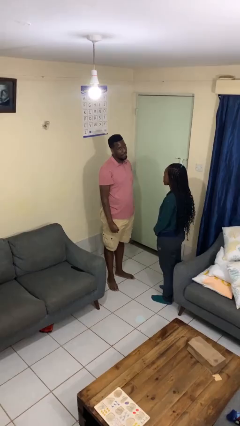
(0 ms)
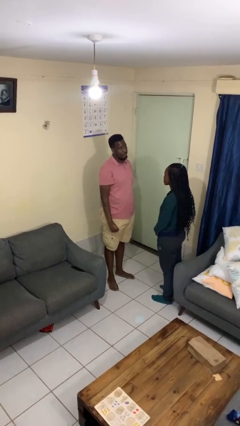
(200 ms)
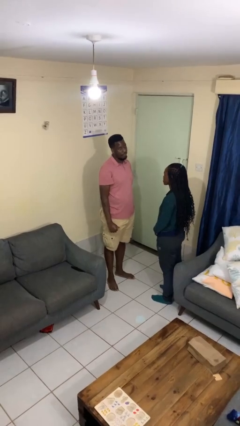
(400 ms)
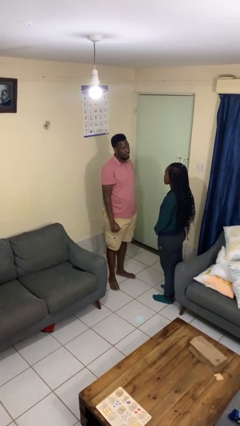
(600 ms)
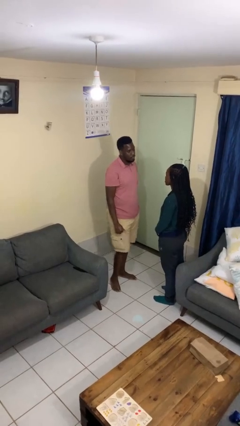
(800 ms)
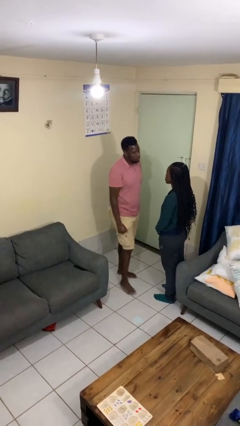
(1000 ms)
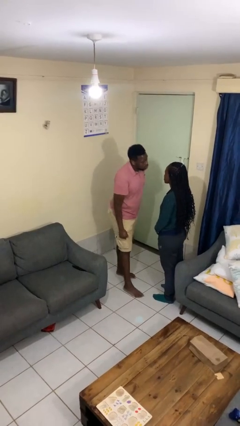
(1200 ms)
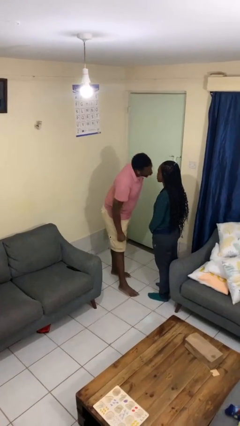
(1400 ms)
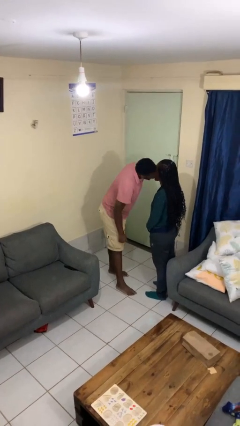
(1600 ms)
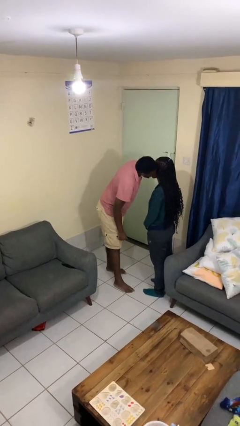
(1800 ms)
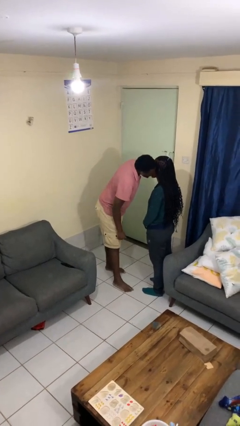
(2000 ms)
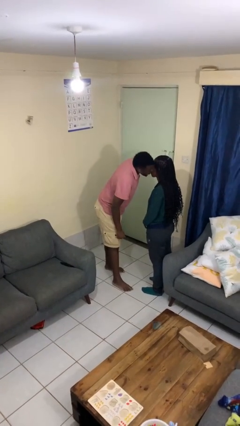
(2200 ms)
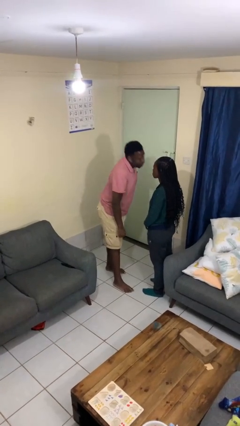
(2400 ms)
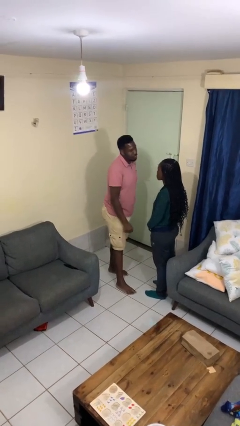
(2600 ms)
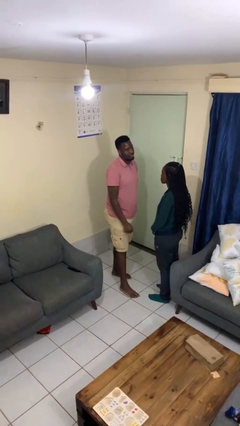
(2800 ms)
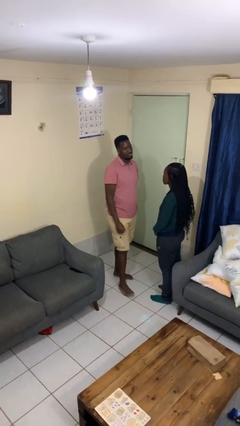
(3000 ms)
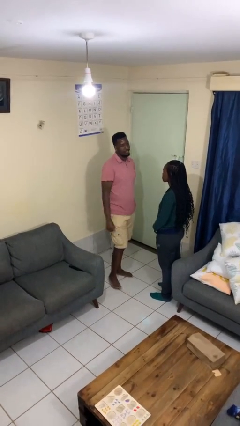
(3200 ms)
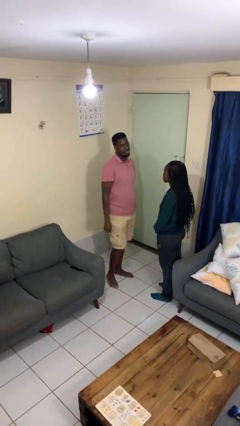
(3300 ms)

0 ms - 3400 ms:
person kisses cheek of person

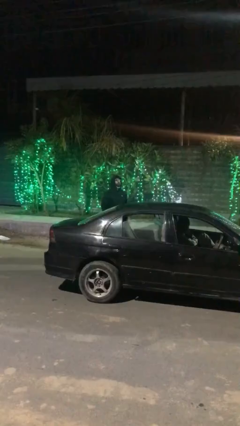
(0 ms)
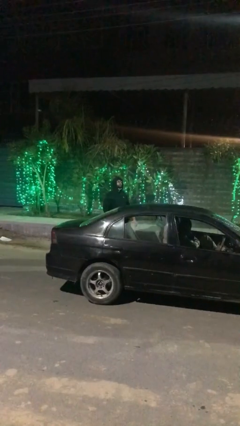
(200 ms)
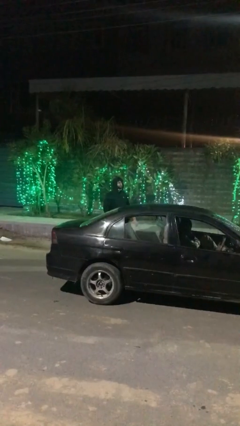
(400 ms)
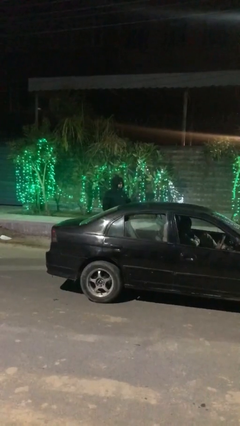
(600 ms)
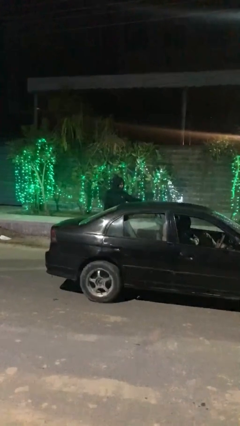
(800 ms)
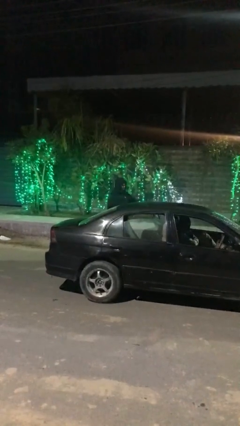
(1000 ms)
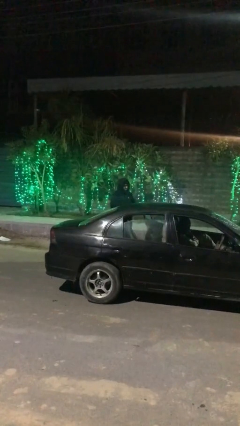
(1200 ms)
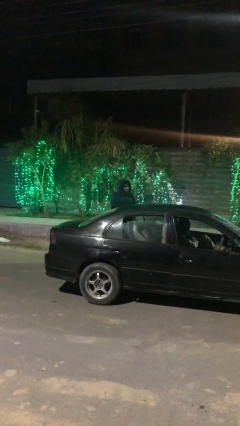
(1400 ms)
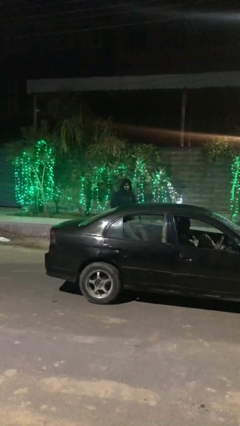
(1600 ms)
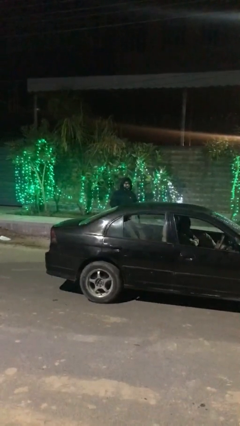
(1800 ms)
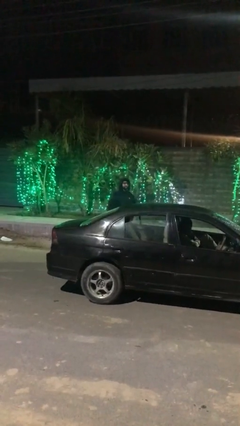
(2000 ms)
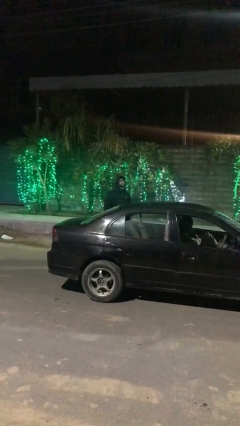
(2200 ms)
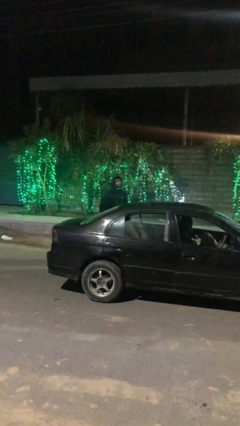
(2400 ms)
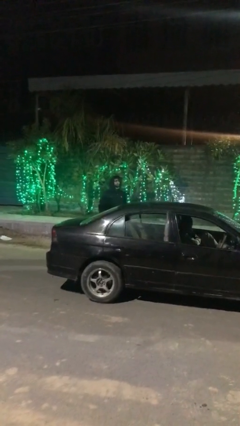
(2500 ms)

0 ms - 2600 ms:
person closes car door

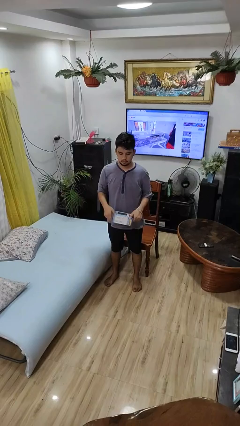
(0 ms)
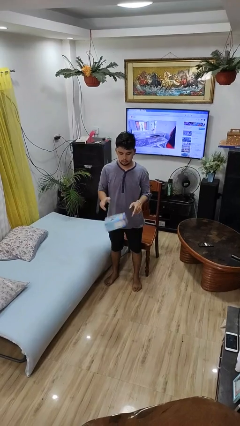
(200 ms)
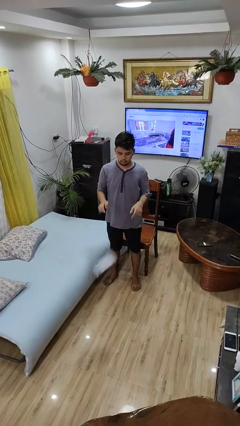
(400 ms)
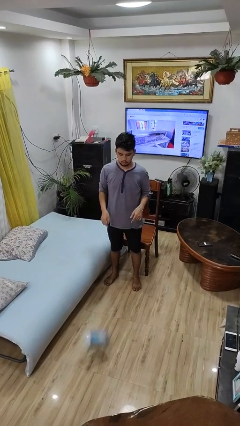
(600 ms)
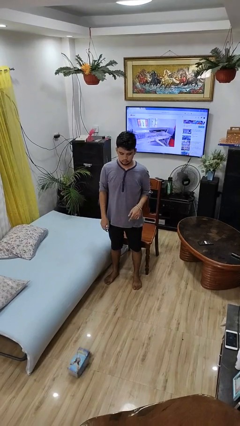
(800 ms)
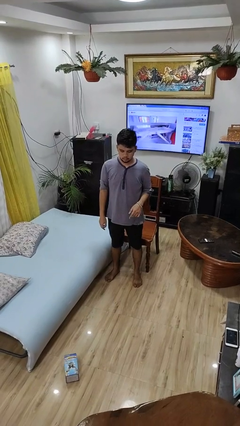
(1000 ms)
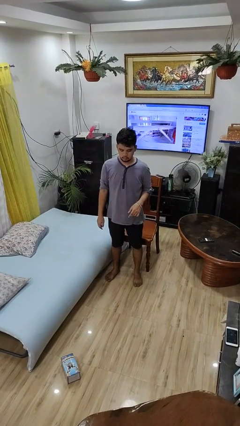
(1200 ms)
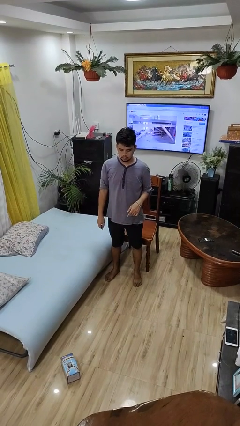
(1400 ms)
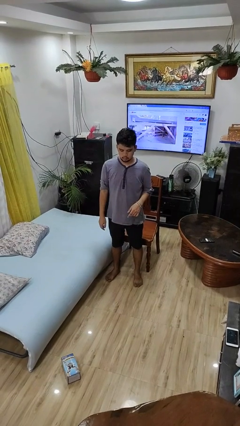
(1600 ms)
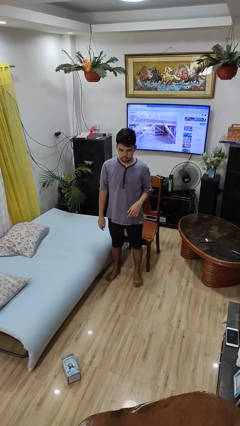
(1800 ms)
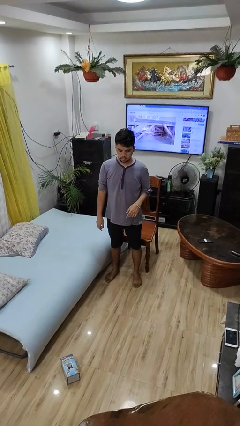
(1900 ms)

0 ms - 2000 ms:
person throws object to ground

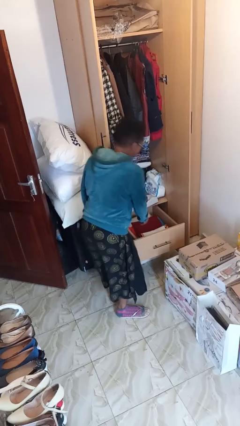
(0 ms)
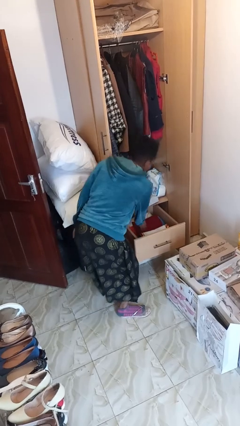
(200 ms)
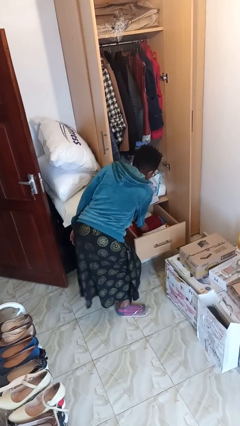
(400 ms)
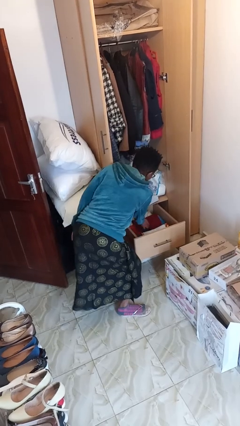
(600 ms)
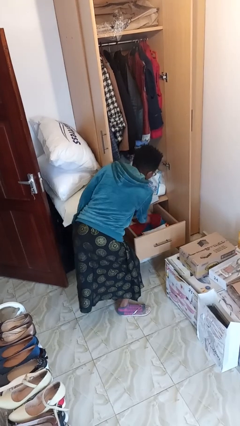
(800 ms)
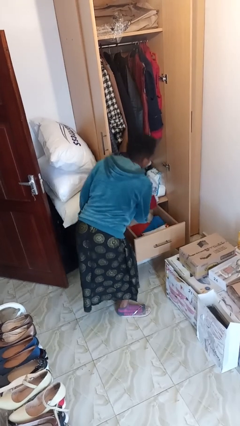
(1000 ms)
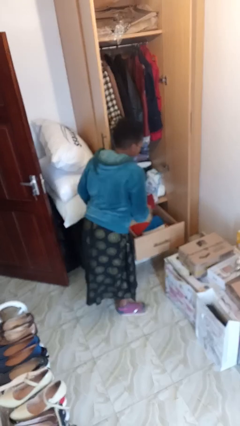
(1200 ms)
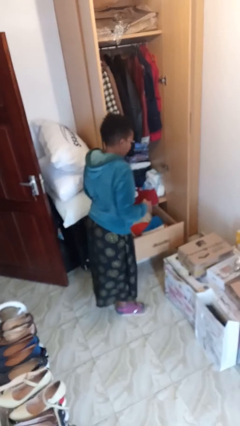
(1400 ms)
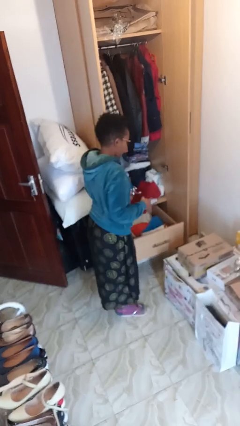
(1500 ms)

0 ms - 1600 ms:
person takes clothes from dresser

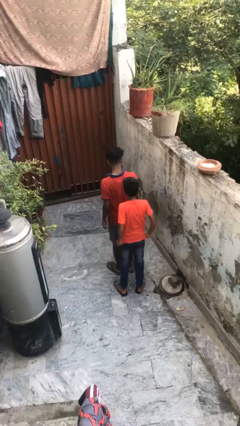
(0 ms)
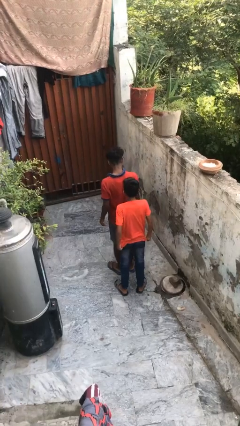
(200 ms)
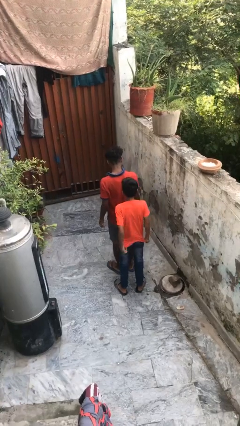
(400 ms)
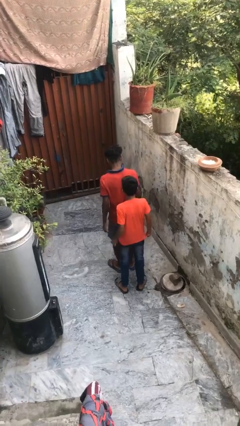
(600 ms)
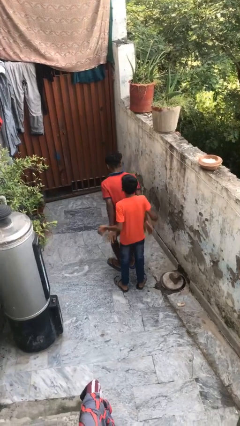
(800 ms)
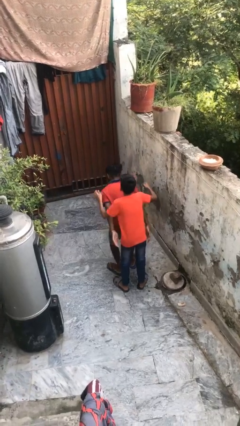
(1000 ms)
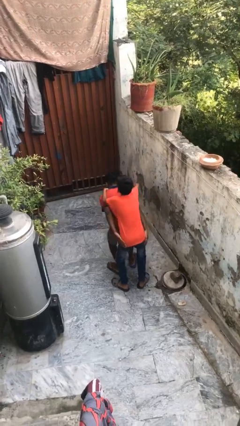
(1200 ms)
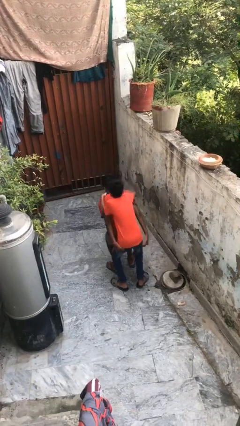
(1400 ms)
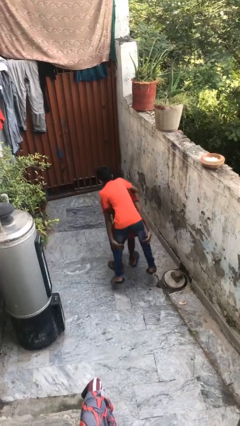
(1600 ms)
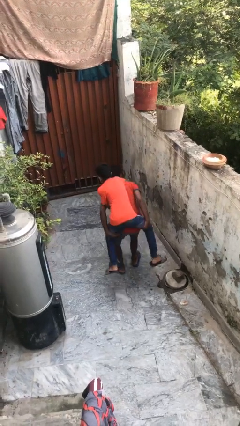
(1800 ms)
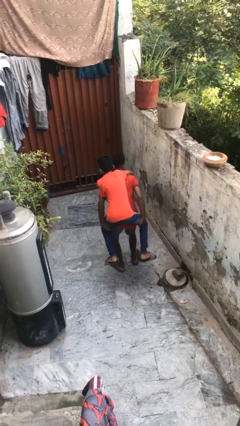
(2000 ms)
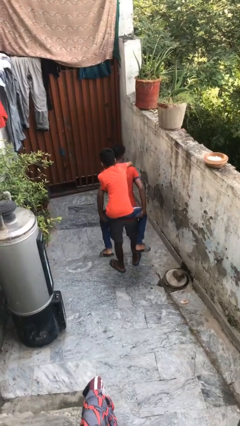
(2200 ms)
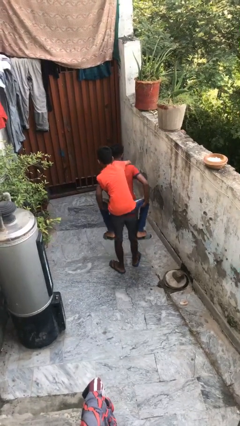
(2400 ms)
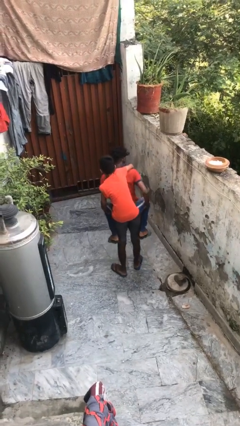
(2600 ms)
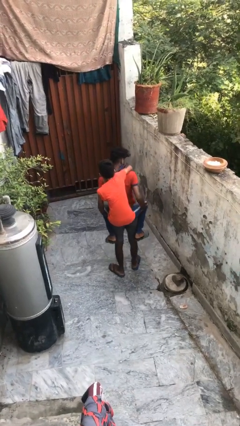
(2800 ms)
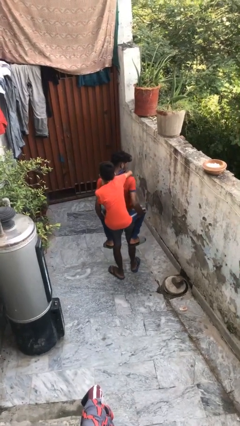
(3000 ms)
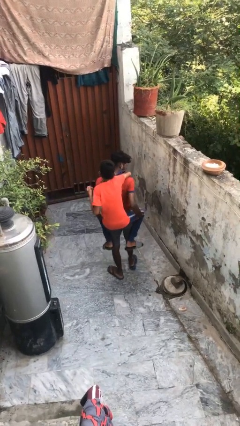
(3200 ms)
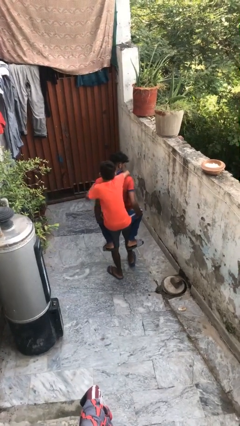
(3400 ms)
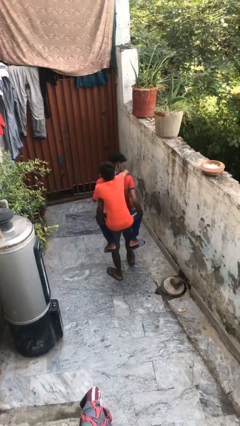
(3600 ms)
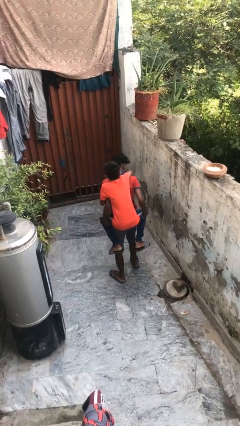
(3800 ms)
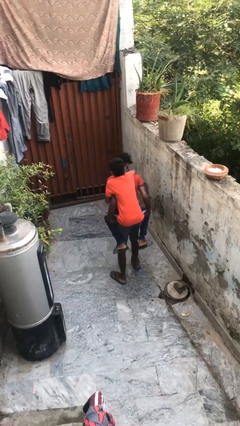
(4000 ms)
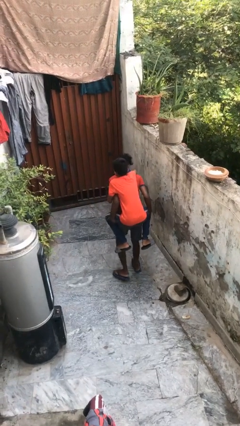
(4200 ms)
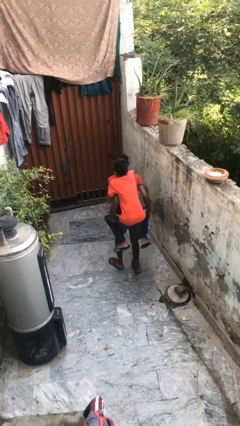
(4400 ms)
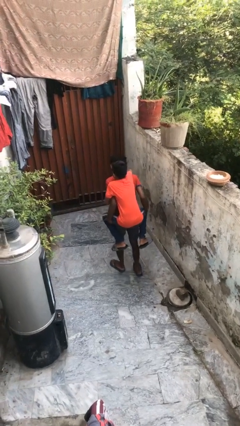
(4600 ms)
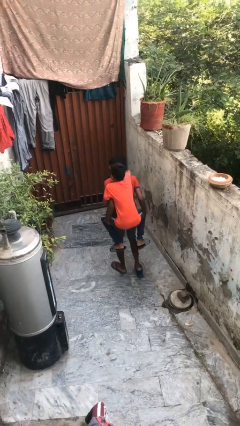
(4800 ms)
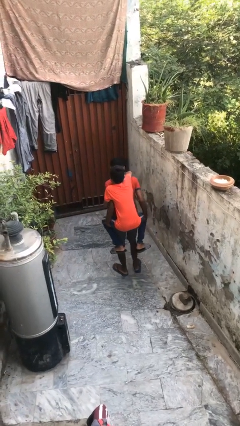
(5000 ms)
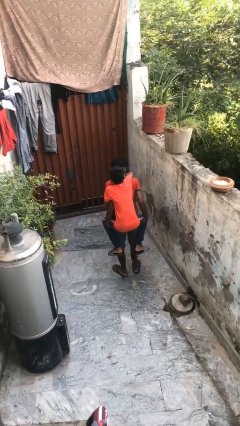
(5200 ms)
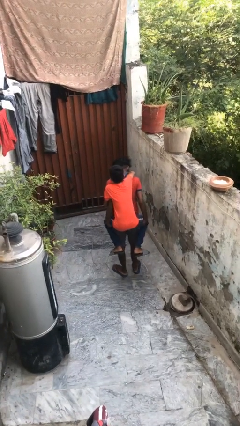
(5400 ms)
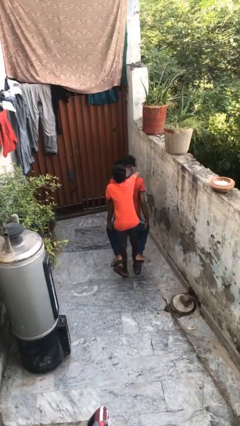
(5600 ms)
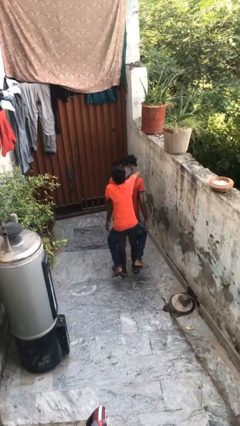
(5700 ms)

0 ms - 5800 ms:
person carries person on back

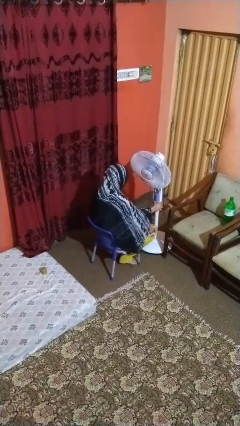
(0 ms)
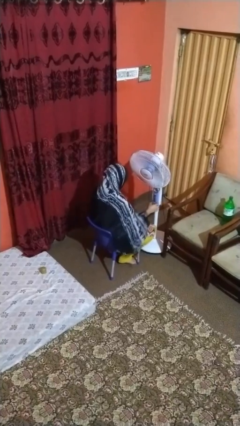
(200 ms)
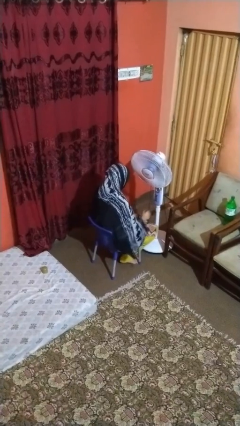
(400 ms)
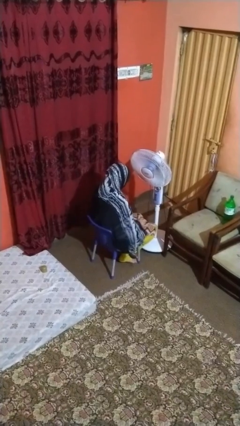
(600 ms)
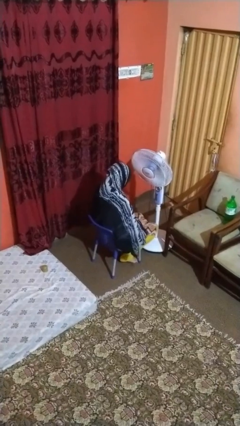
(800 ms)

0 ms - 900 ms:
person turns off fan

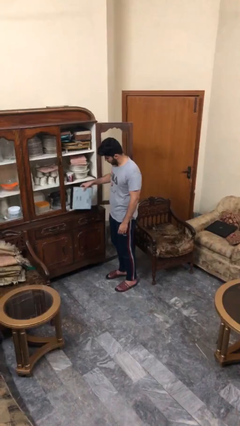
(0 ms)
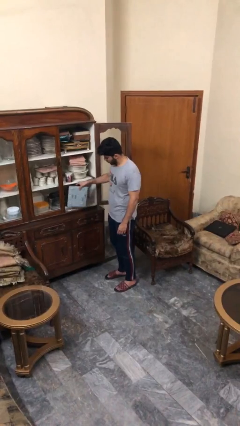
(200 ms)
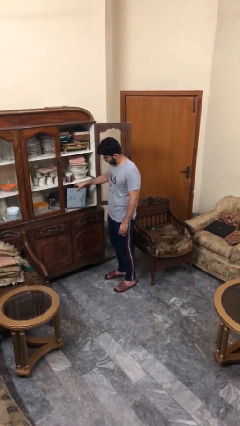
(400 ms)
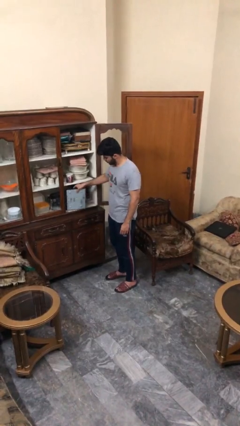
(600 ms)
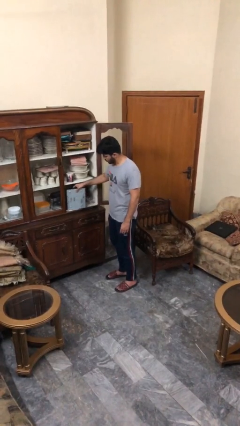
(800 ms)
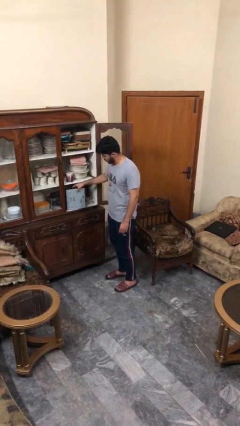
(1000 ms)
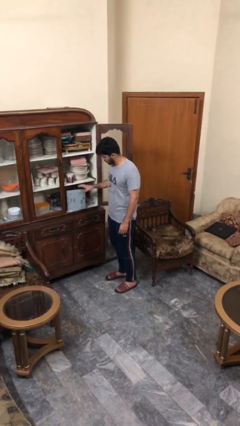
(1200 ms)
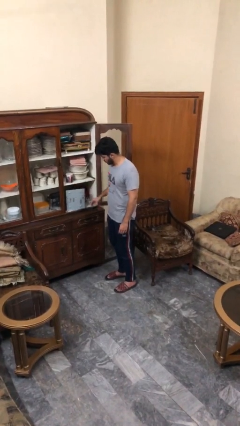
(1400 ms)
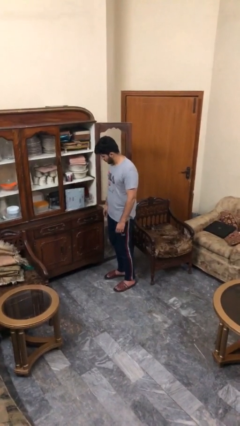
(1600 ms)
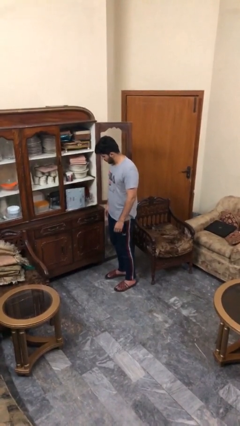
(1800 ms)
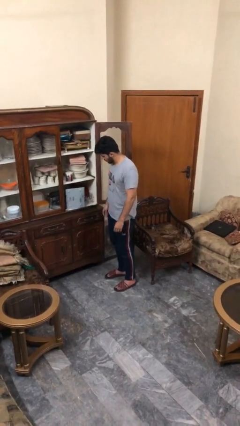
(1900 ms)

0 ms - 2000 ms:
person puts down object into cabinet
